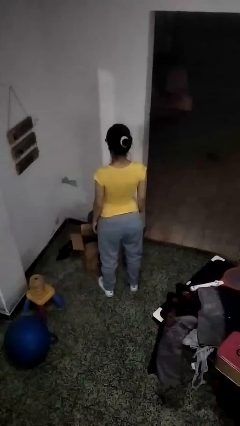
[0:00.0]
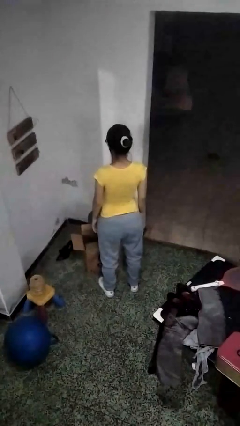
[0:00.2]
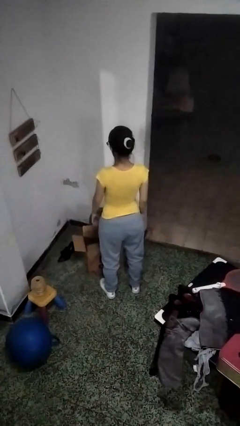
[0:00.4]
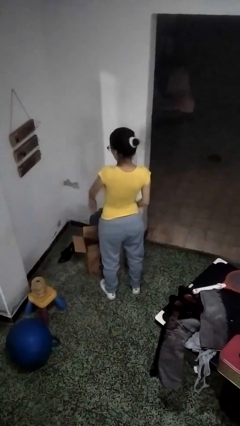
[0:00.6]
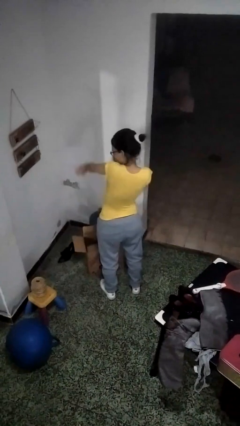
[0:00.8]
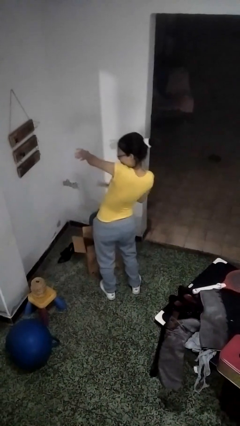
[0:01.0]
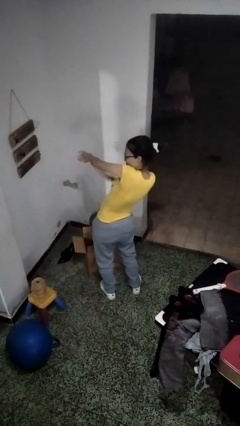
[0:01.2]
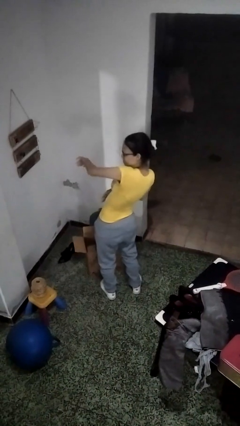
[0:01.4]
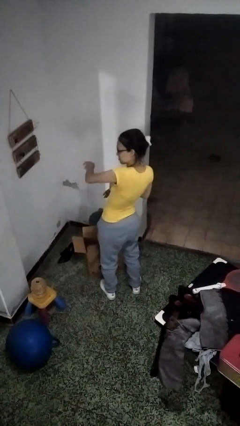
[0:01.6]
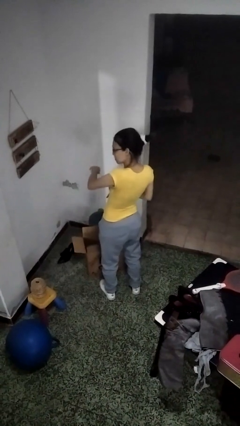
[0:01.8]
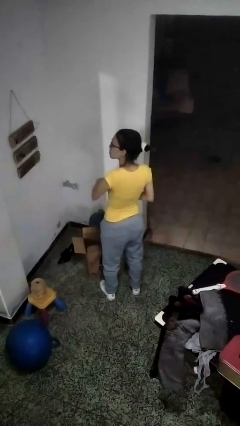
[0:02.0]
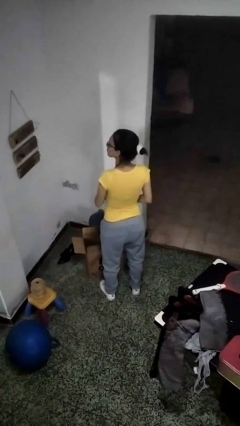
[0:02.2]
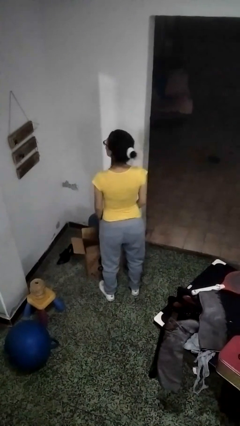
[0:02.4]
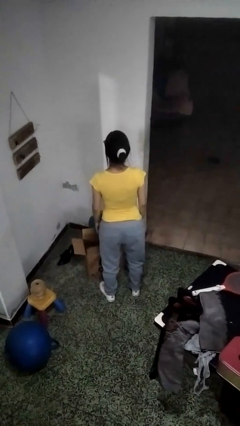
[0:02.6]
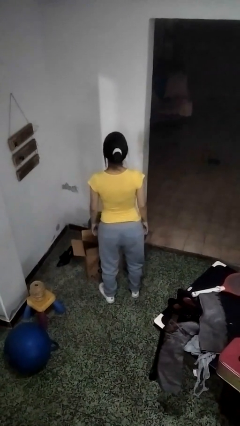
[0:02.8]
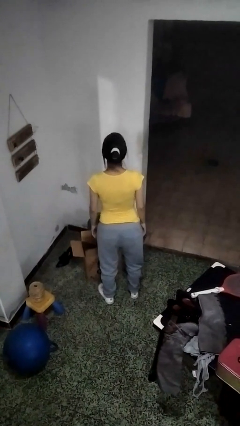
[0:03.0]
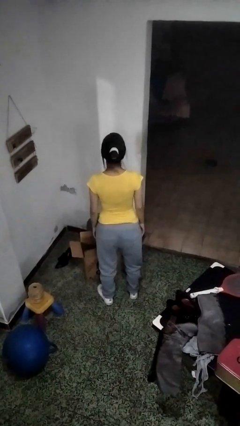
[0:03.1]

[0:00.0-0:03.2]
person swats bug

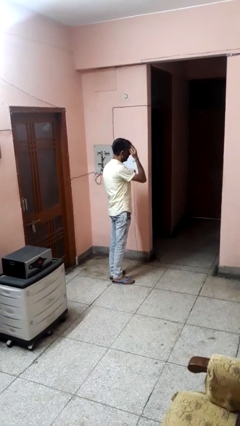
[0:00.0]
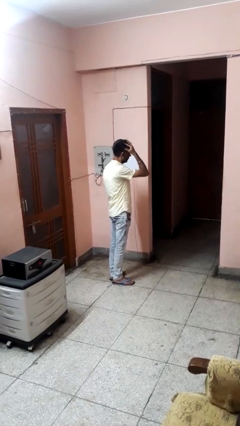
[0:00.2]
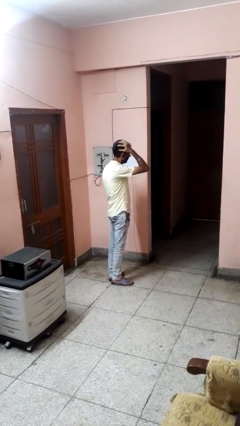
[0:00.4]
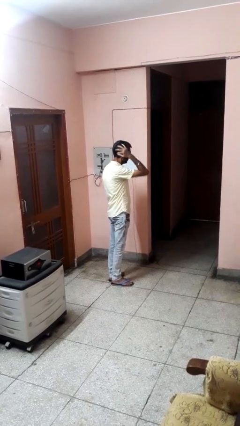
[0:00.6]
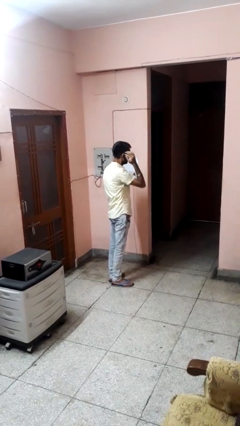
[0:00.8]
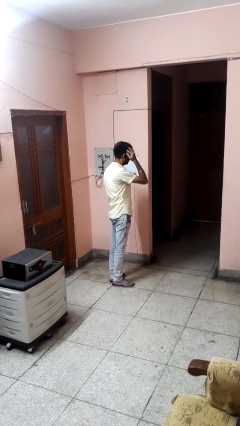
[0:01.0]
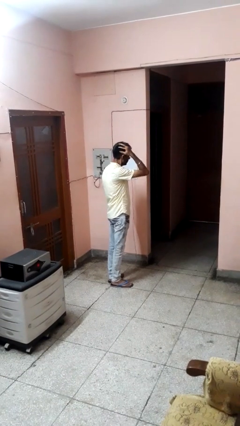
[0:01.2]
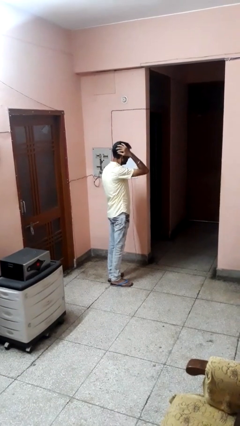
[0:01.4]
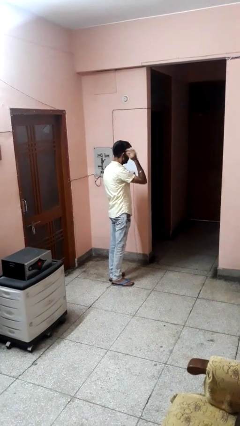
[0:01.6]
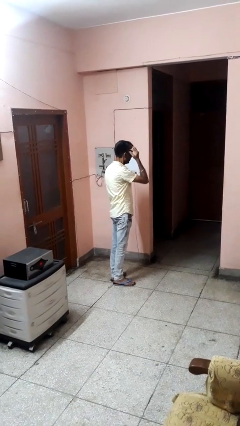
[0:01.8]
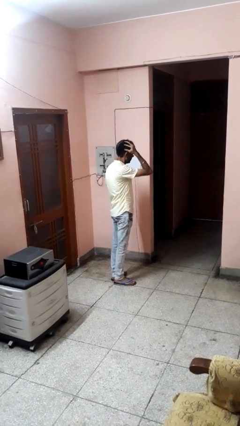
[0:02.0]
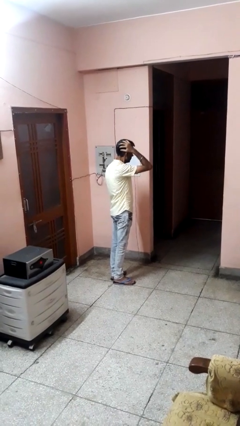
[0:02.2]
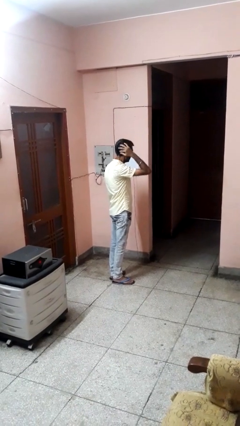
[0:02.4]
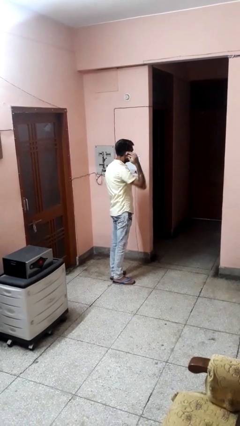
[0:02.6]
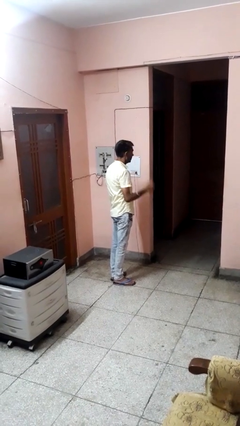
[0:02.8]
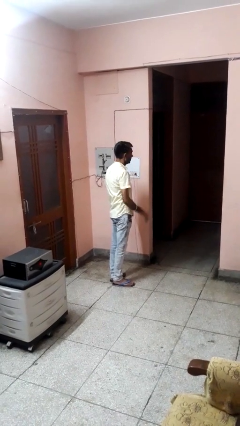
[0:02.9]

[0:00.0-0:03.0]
person strokes hair

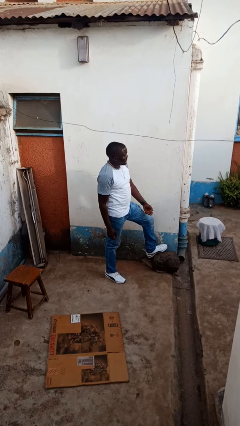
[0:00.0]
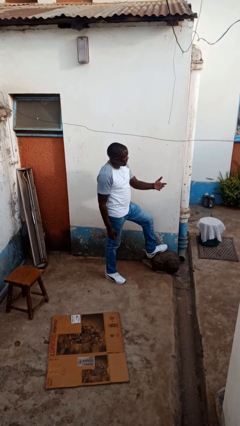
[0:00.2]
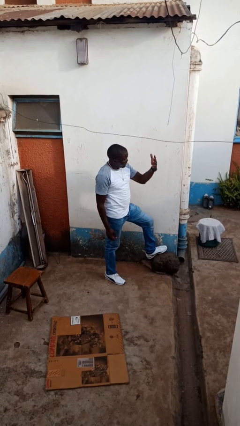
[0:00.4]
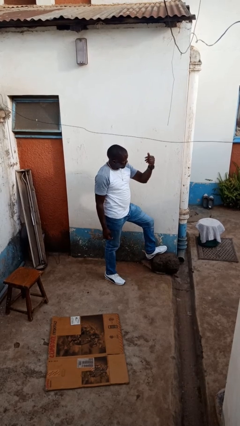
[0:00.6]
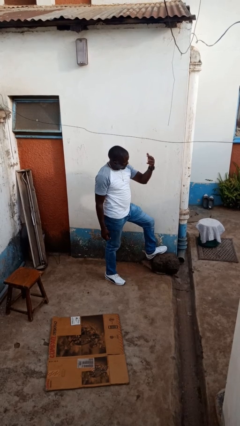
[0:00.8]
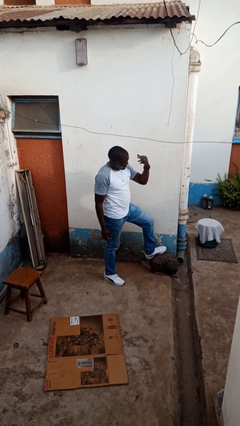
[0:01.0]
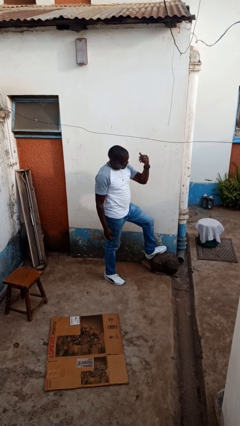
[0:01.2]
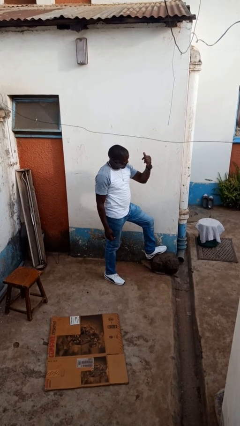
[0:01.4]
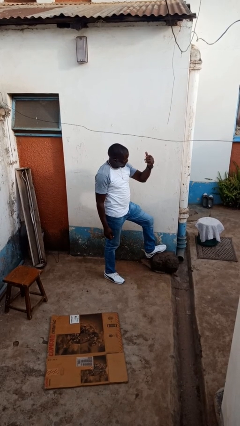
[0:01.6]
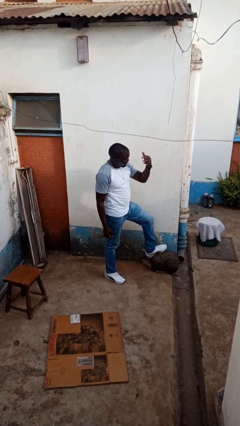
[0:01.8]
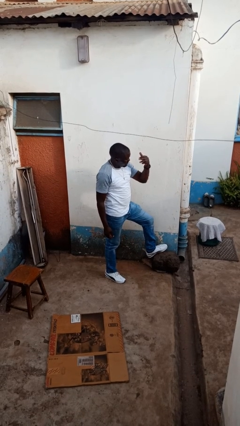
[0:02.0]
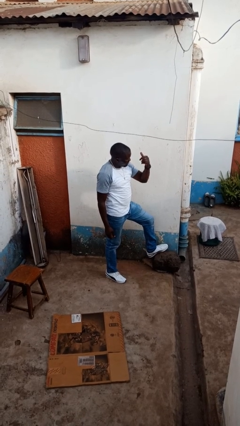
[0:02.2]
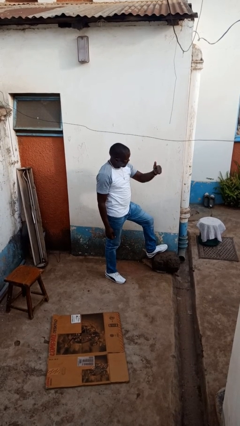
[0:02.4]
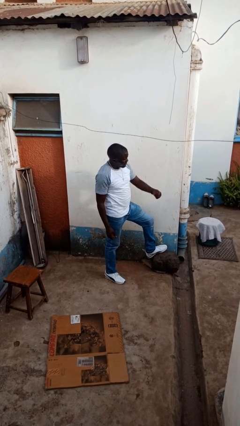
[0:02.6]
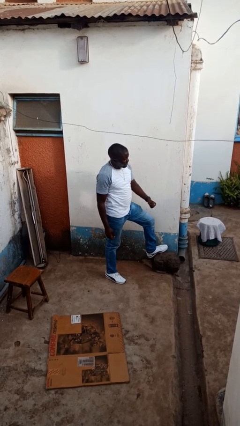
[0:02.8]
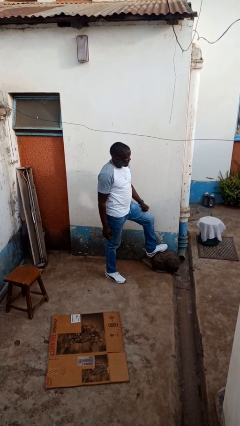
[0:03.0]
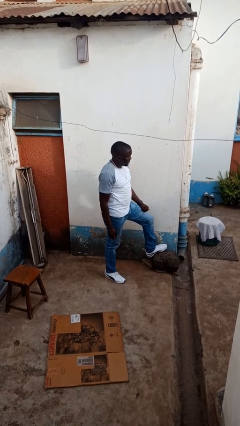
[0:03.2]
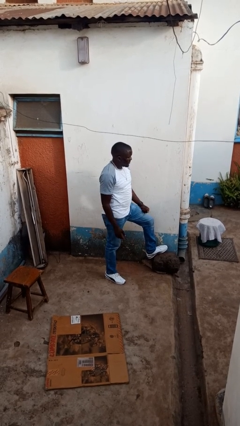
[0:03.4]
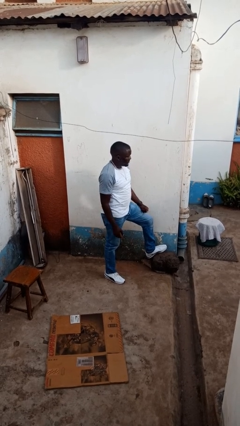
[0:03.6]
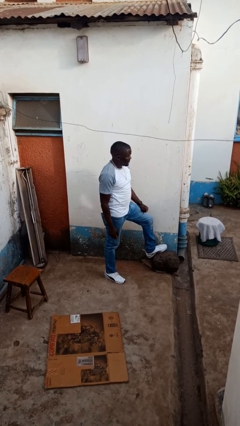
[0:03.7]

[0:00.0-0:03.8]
person gestures come here

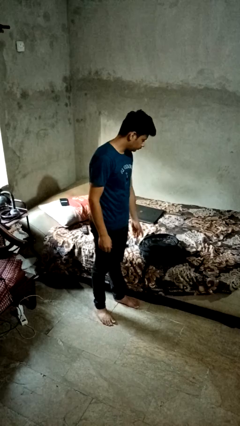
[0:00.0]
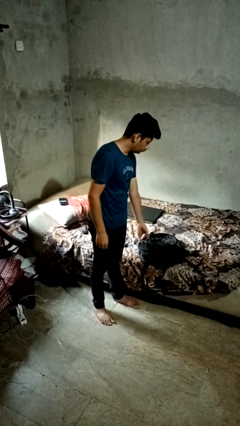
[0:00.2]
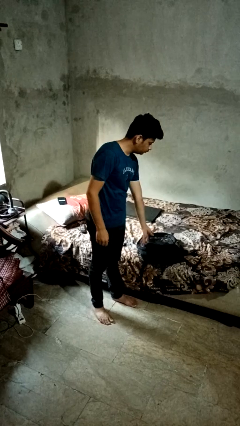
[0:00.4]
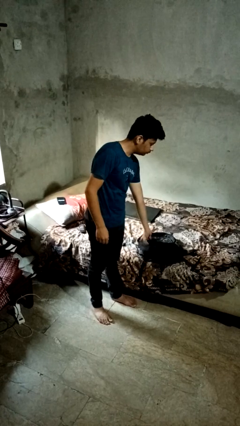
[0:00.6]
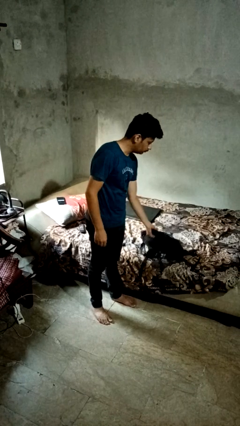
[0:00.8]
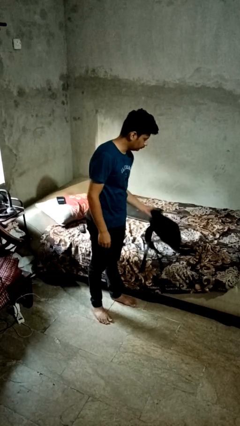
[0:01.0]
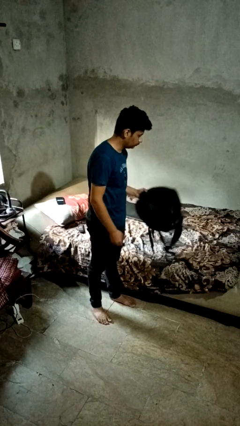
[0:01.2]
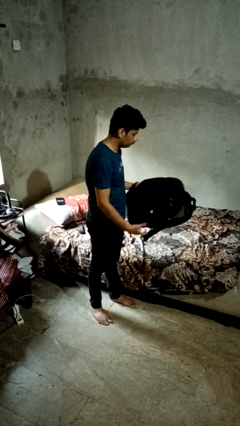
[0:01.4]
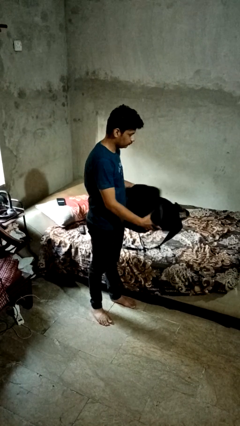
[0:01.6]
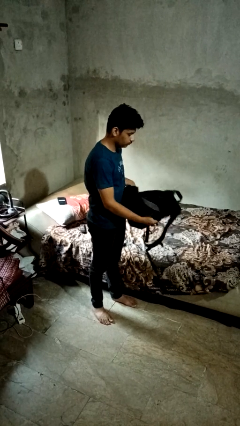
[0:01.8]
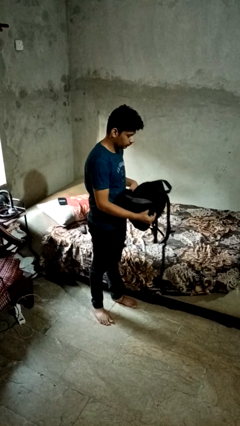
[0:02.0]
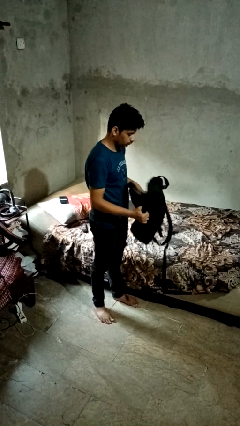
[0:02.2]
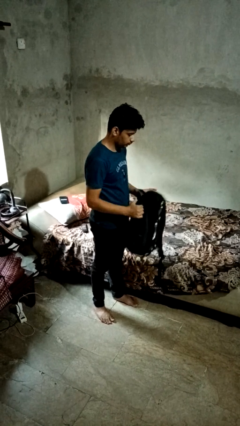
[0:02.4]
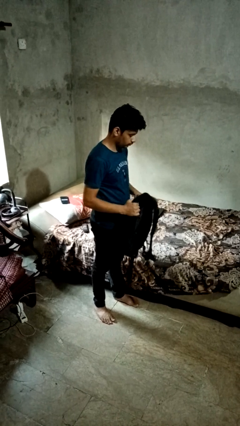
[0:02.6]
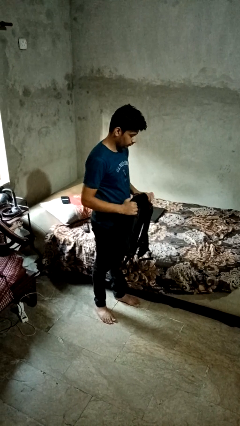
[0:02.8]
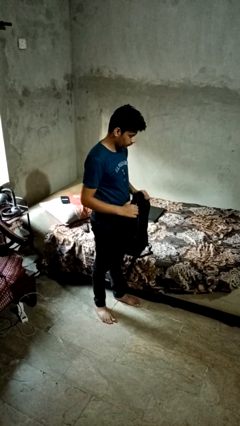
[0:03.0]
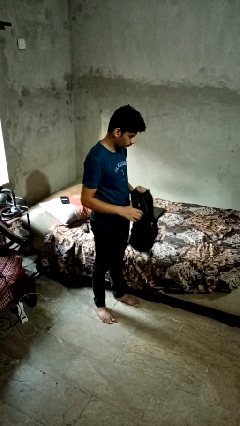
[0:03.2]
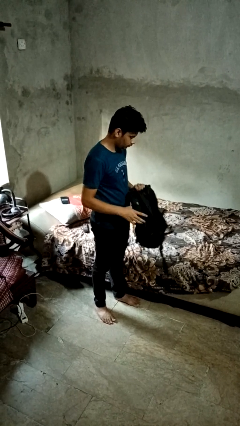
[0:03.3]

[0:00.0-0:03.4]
person picks up object from bed

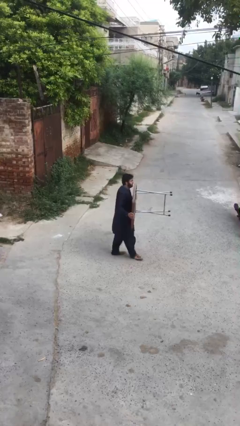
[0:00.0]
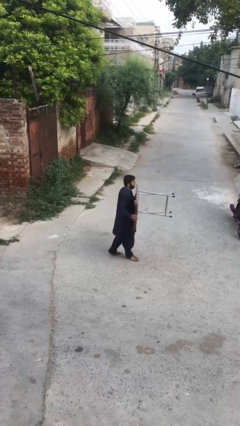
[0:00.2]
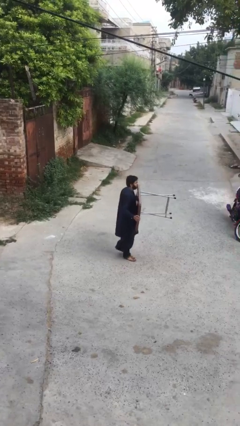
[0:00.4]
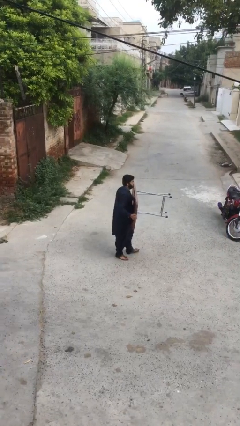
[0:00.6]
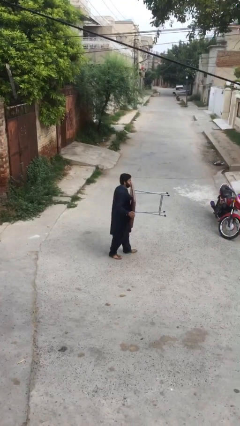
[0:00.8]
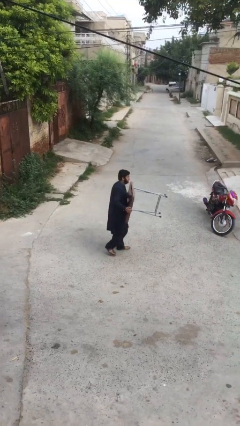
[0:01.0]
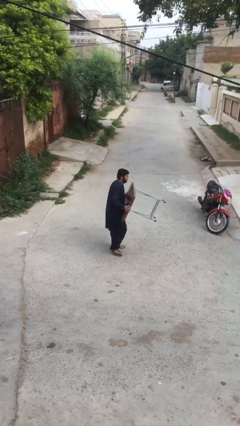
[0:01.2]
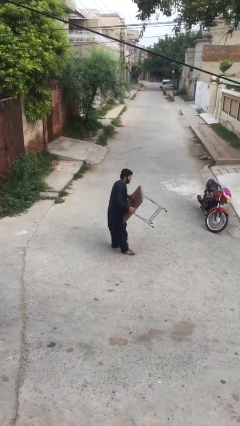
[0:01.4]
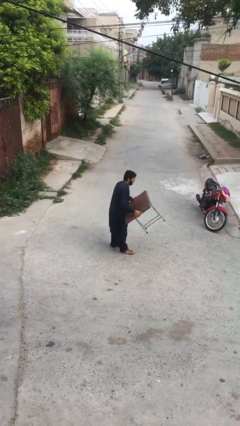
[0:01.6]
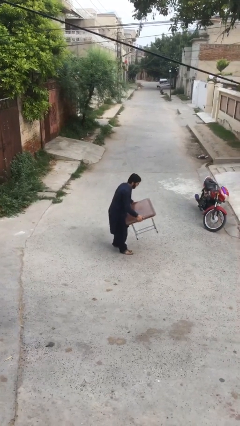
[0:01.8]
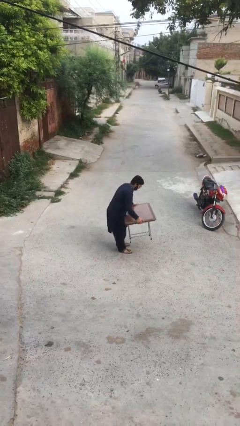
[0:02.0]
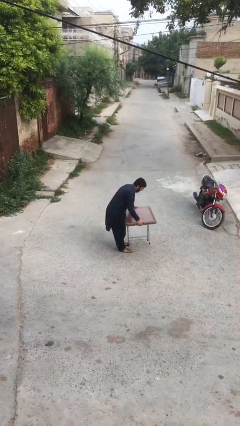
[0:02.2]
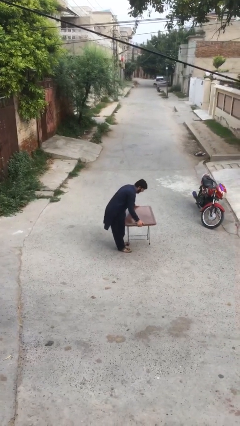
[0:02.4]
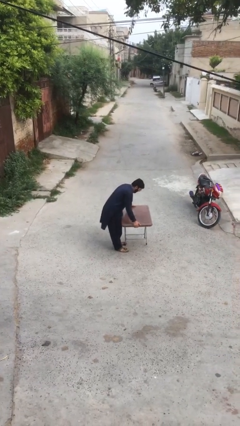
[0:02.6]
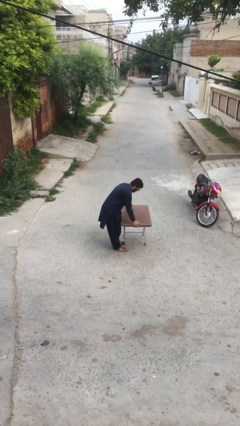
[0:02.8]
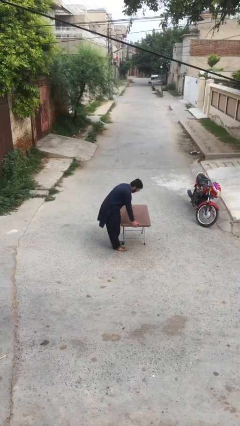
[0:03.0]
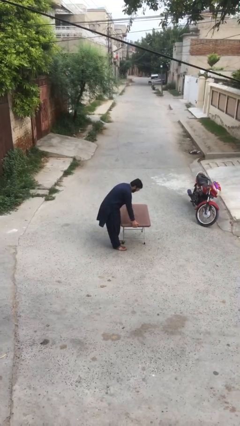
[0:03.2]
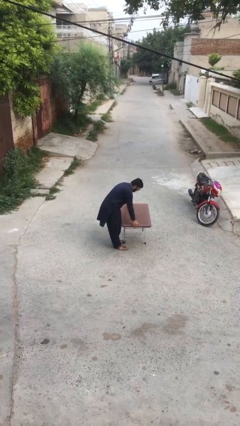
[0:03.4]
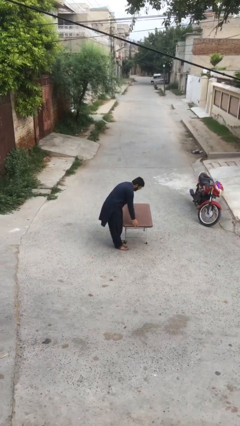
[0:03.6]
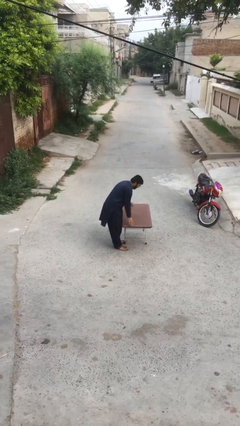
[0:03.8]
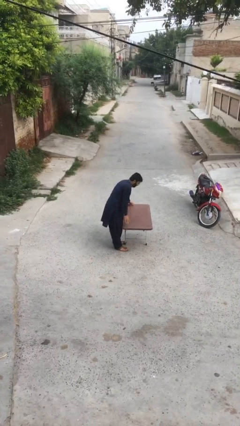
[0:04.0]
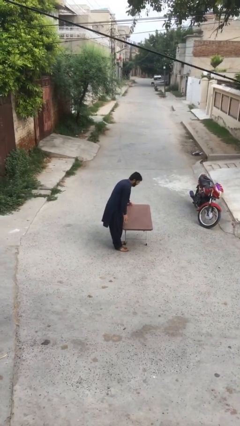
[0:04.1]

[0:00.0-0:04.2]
person puts down object on floor

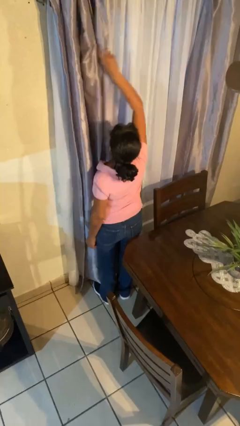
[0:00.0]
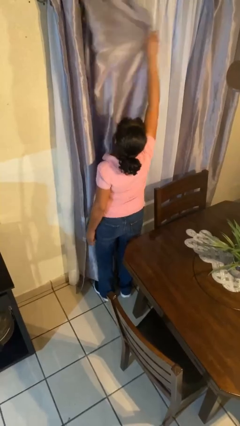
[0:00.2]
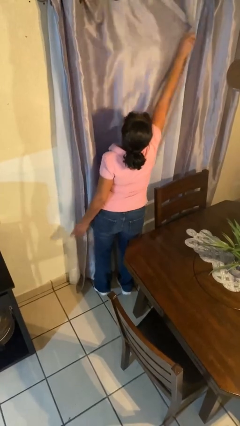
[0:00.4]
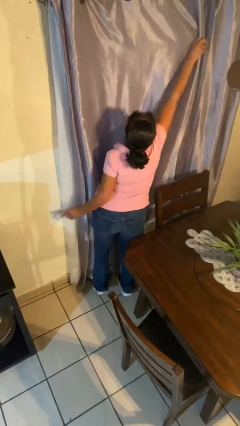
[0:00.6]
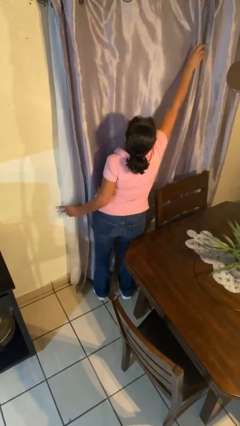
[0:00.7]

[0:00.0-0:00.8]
person closes curtains
